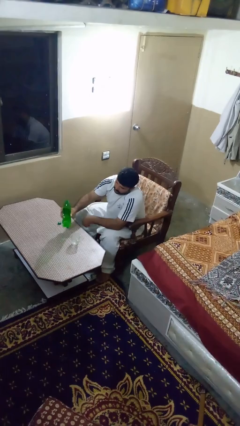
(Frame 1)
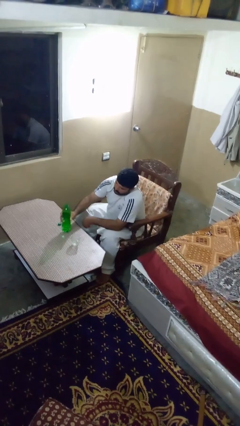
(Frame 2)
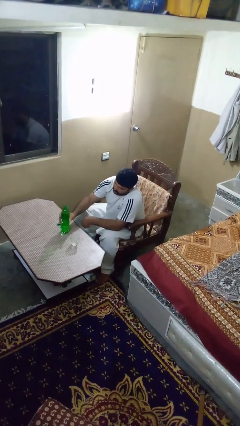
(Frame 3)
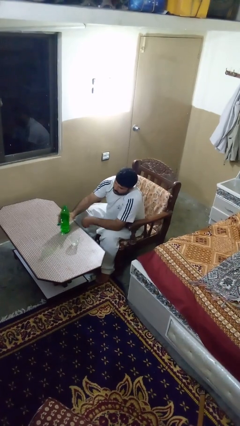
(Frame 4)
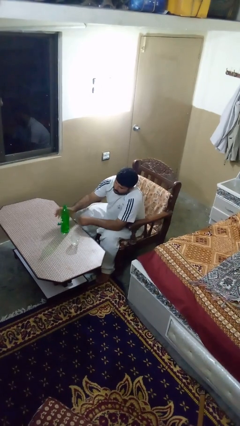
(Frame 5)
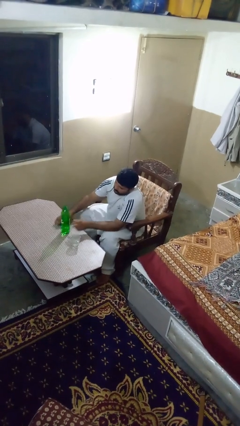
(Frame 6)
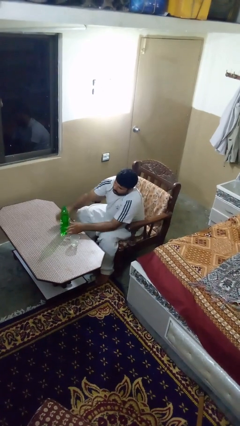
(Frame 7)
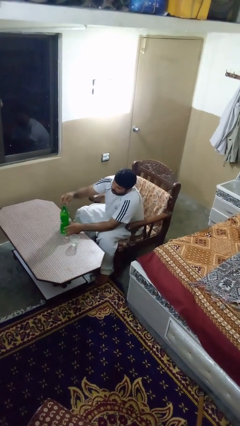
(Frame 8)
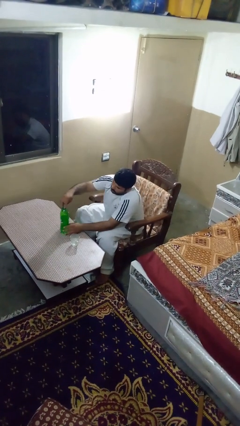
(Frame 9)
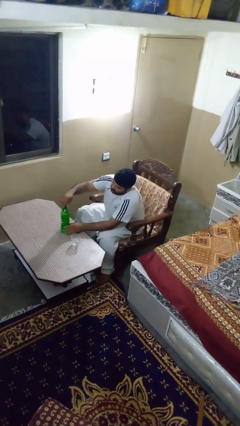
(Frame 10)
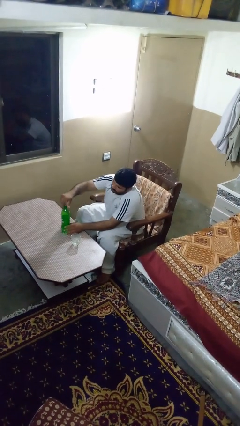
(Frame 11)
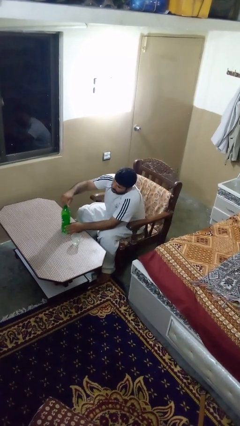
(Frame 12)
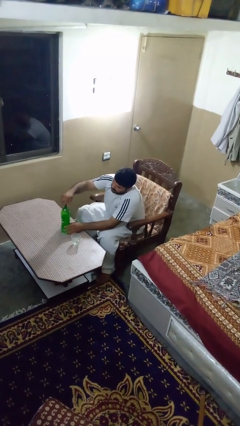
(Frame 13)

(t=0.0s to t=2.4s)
person screws lid to bottle

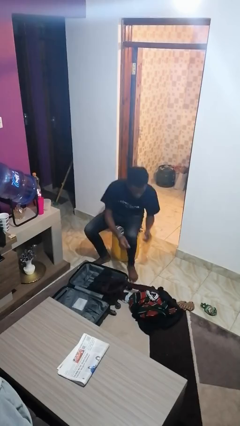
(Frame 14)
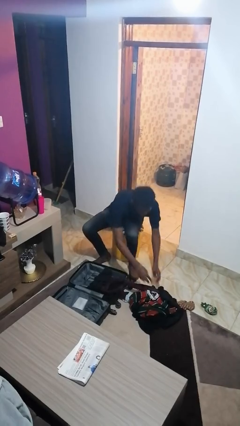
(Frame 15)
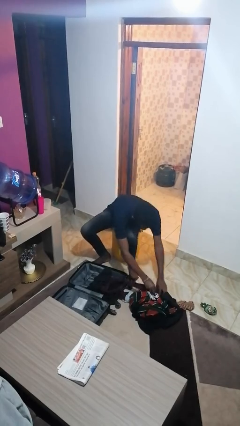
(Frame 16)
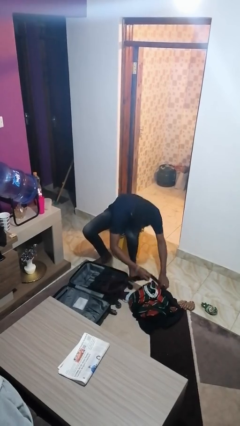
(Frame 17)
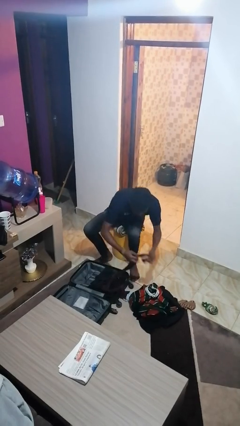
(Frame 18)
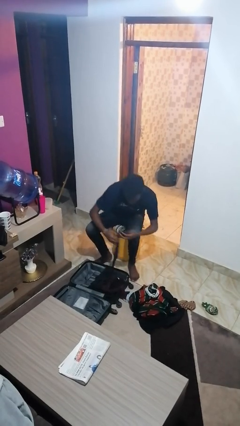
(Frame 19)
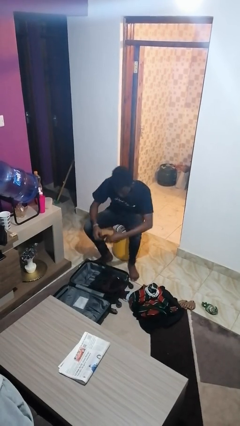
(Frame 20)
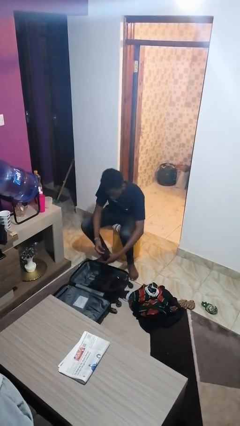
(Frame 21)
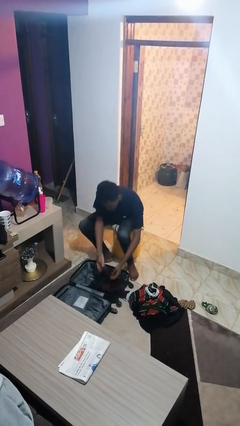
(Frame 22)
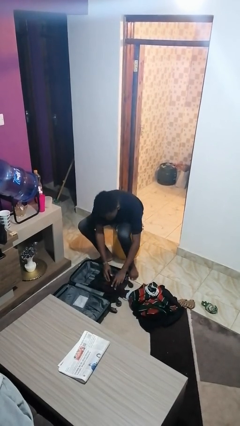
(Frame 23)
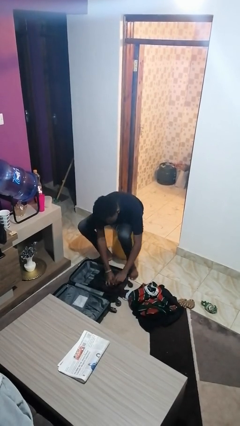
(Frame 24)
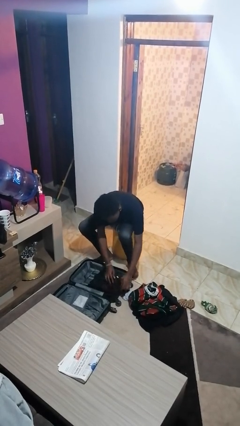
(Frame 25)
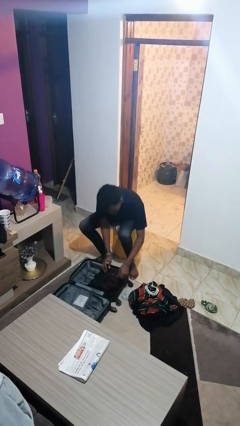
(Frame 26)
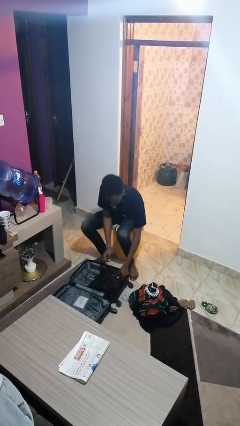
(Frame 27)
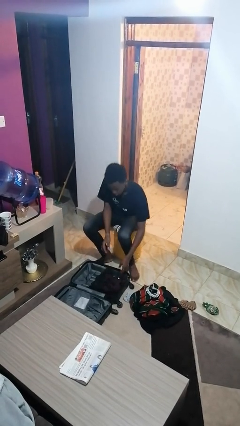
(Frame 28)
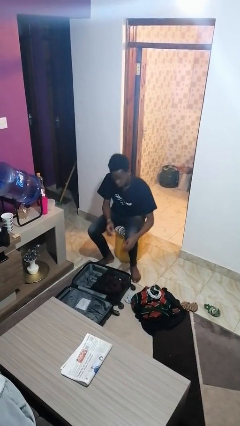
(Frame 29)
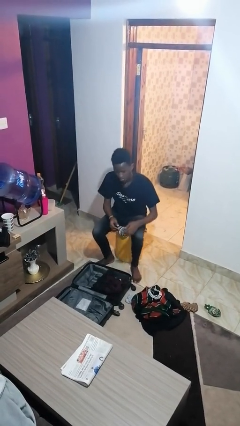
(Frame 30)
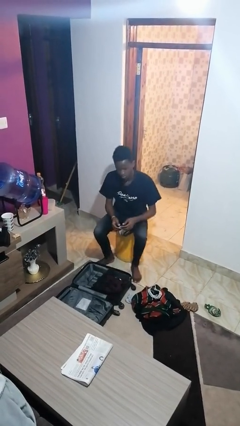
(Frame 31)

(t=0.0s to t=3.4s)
person loads clothes into suitcase

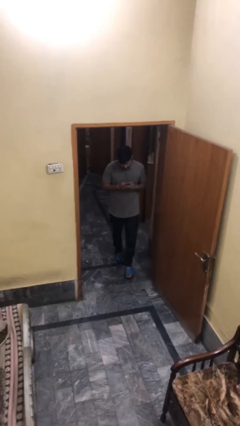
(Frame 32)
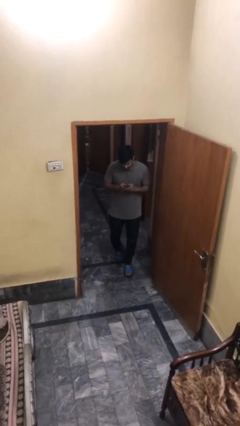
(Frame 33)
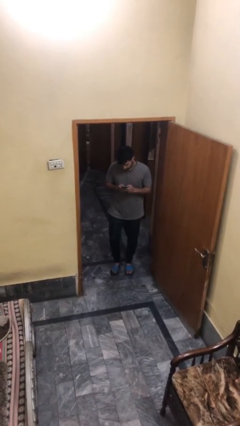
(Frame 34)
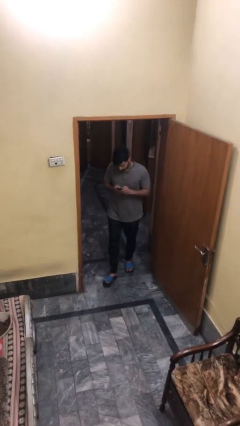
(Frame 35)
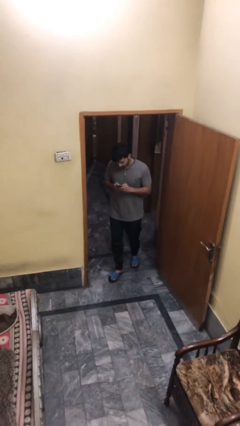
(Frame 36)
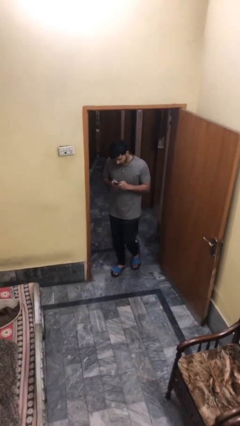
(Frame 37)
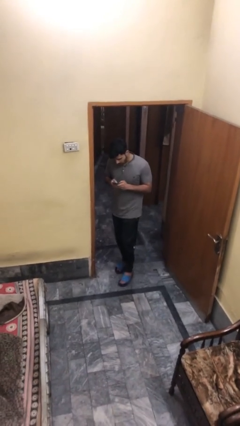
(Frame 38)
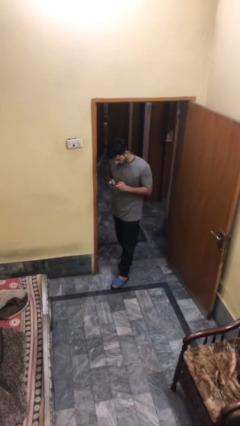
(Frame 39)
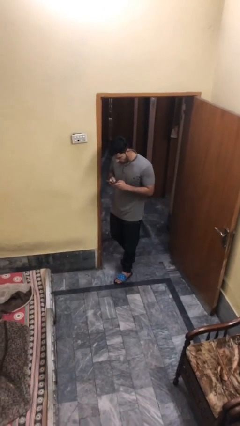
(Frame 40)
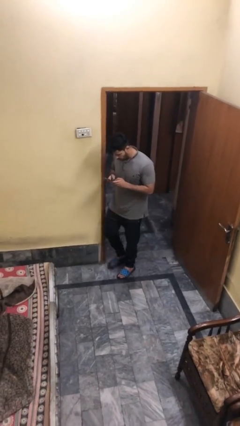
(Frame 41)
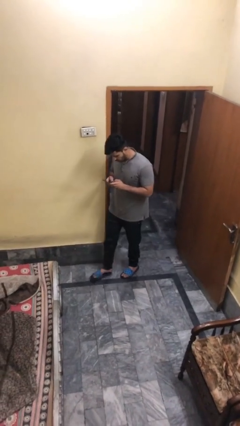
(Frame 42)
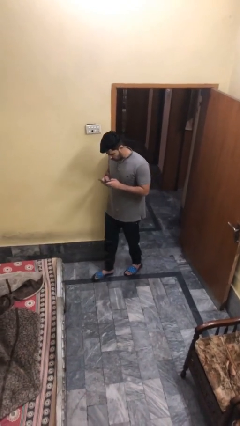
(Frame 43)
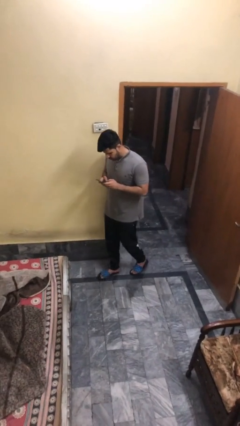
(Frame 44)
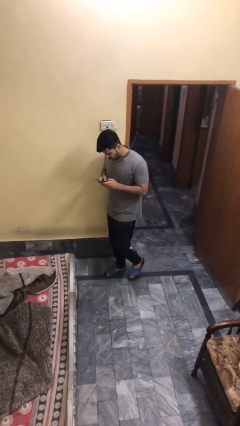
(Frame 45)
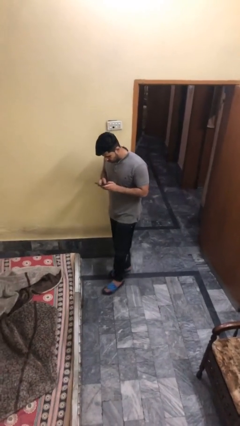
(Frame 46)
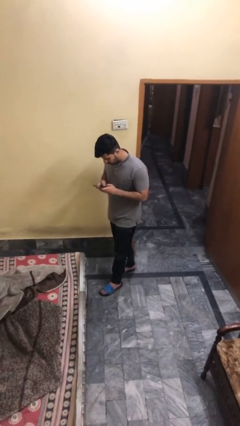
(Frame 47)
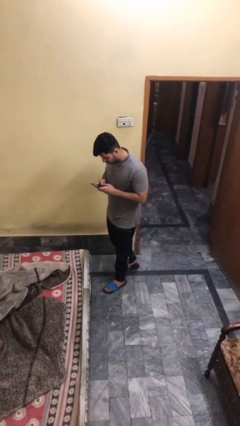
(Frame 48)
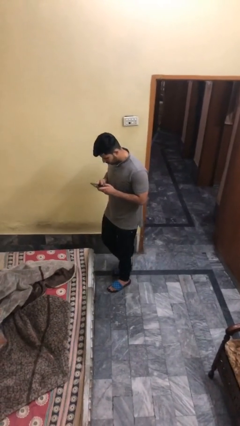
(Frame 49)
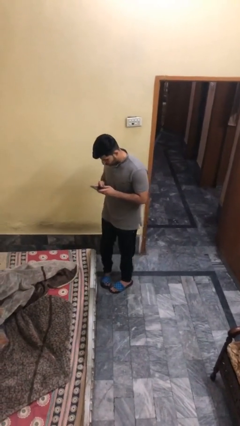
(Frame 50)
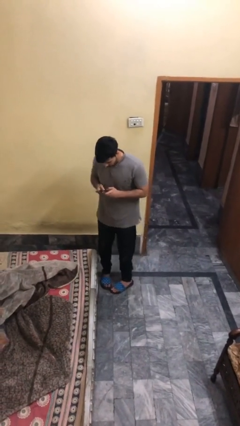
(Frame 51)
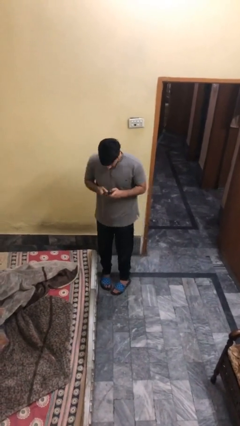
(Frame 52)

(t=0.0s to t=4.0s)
person enters scene through structure

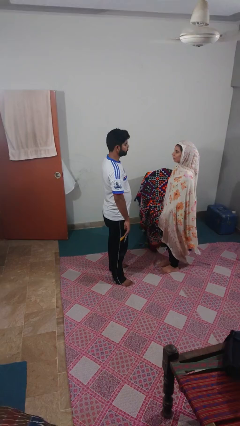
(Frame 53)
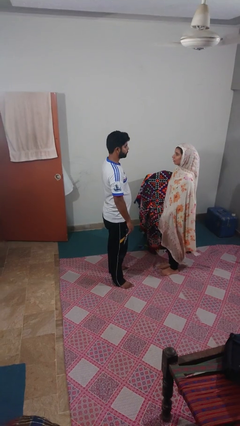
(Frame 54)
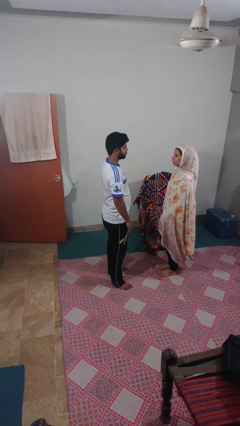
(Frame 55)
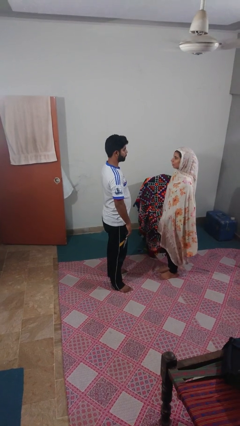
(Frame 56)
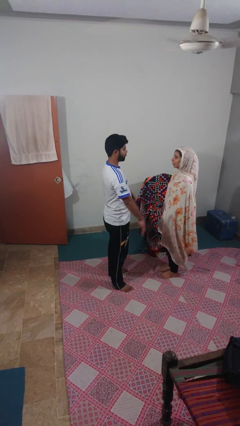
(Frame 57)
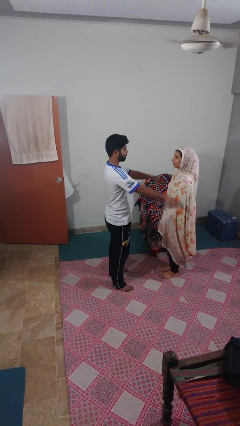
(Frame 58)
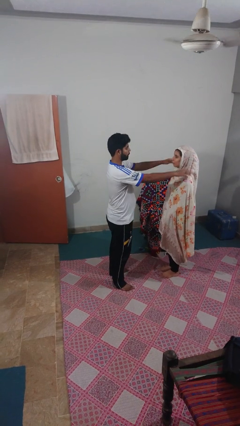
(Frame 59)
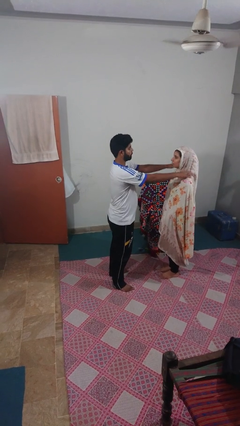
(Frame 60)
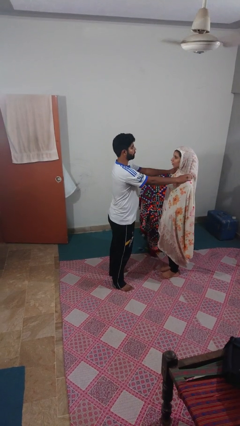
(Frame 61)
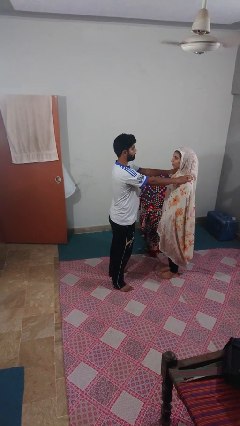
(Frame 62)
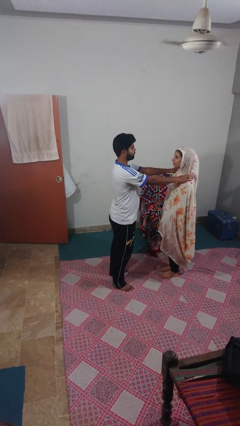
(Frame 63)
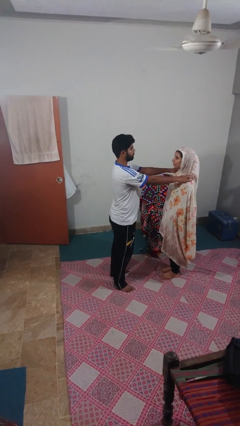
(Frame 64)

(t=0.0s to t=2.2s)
person pounds shoulders of person

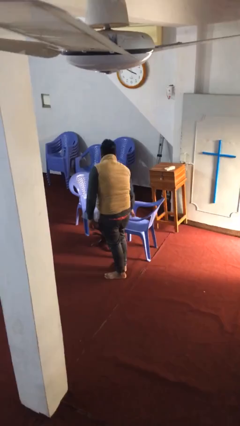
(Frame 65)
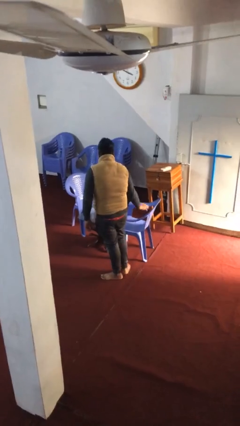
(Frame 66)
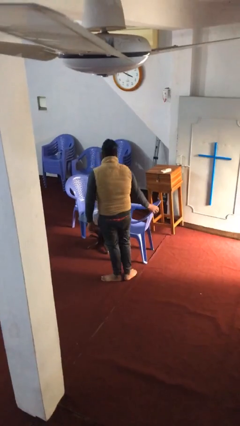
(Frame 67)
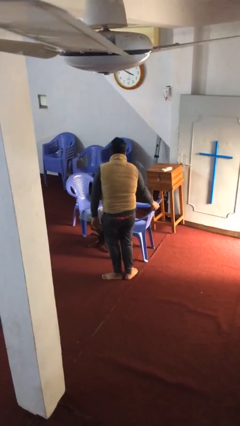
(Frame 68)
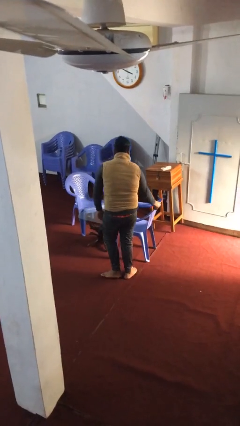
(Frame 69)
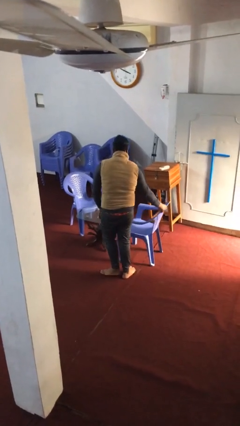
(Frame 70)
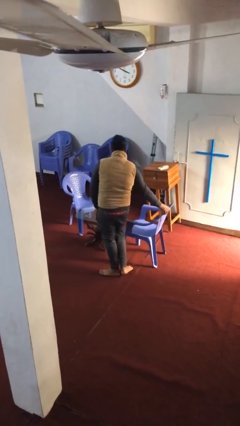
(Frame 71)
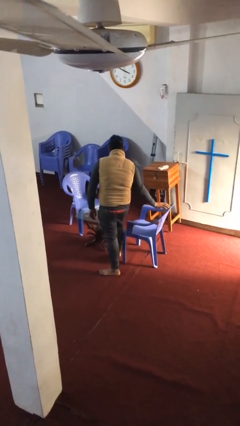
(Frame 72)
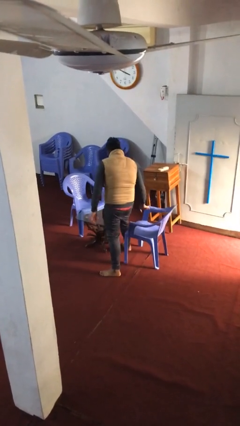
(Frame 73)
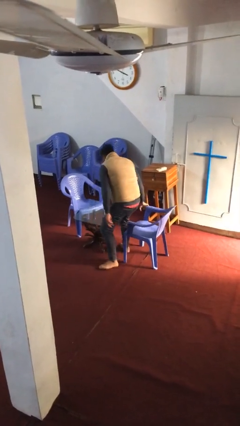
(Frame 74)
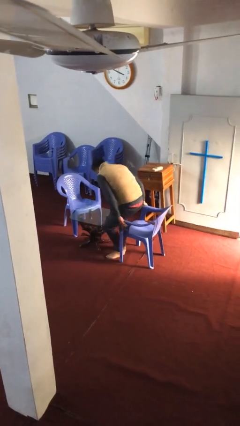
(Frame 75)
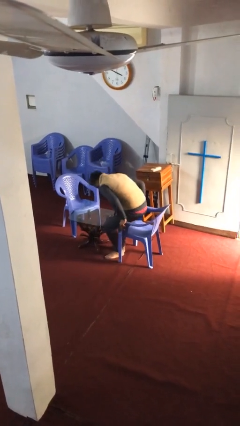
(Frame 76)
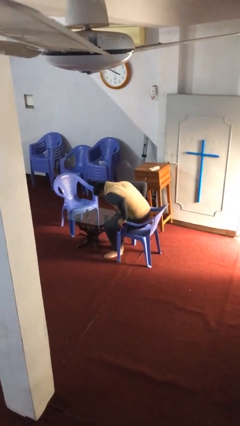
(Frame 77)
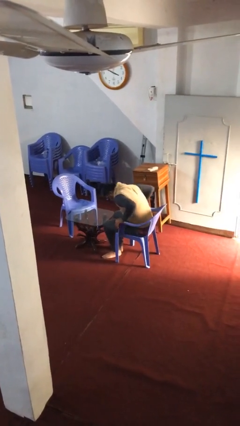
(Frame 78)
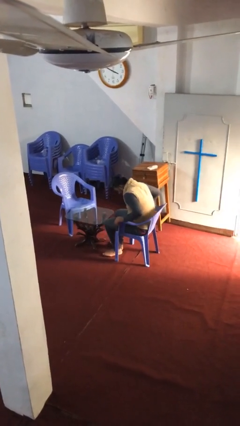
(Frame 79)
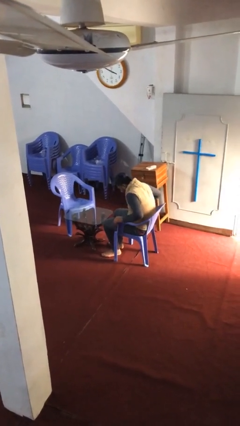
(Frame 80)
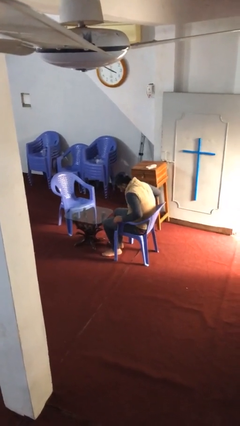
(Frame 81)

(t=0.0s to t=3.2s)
person sits down

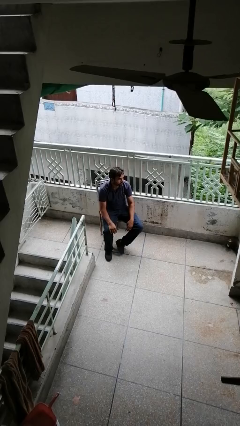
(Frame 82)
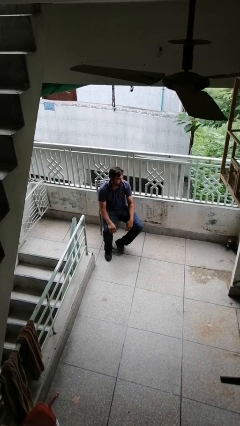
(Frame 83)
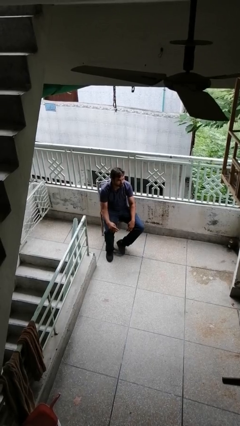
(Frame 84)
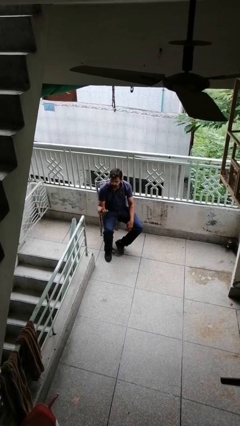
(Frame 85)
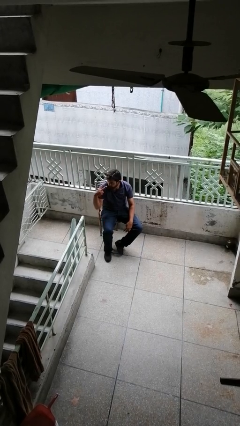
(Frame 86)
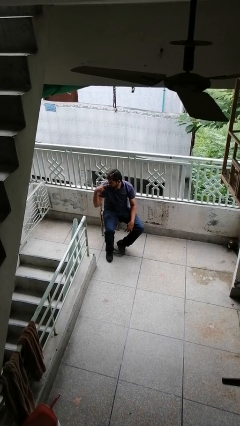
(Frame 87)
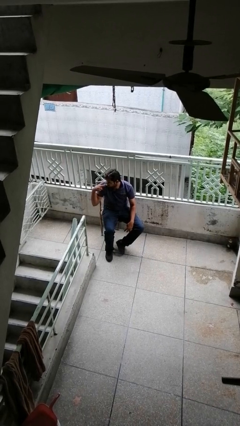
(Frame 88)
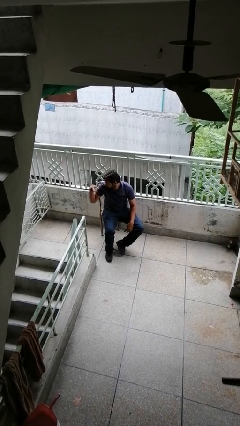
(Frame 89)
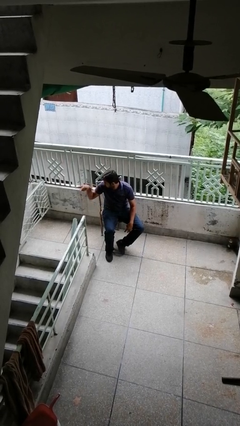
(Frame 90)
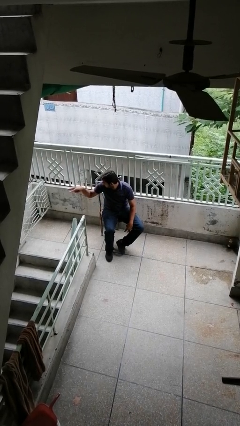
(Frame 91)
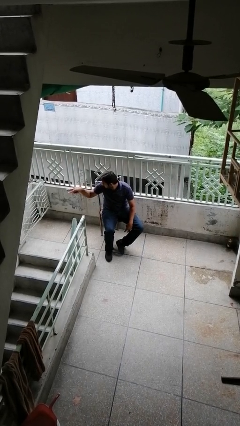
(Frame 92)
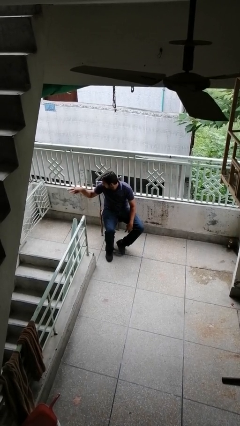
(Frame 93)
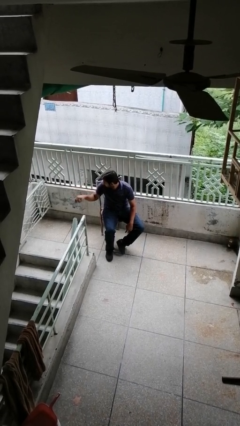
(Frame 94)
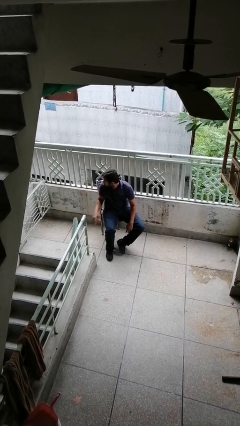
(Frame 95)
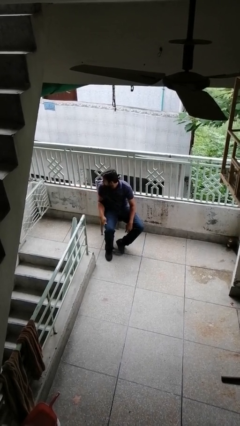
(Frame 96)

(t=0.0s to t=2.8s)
person gestures watch closely
